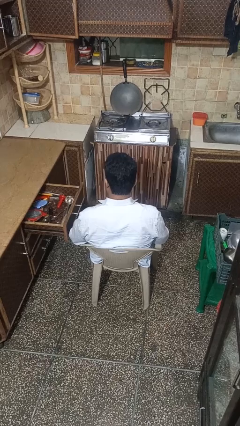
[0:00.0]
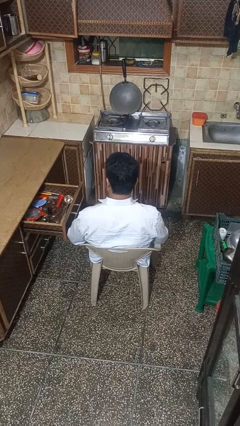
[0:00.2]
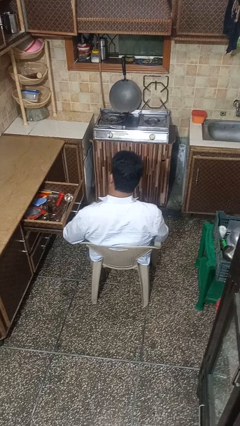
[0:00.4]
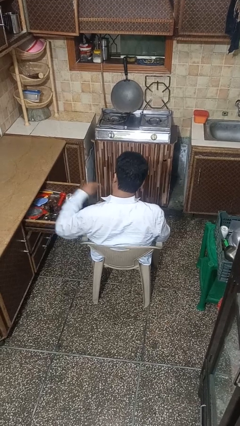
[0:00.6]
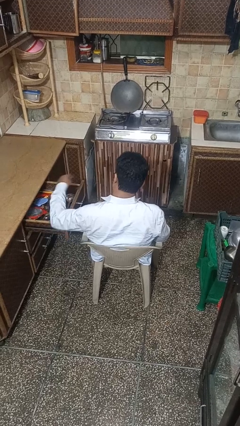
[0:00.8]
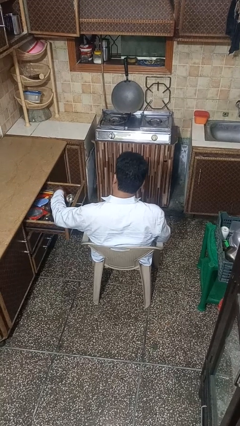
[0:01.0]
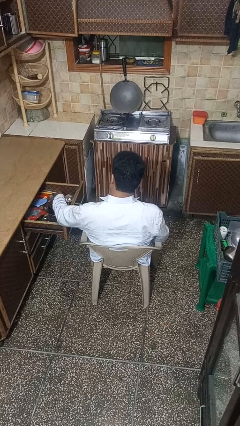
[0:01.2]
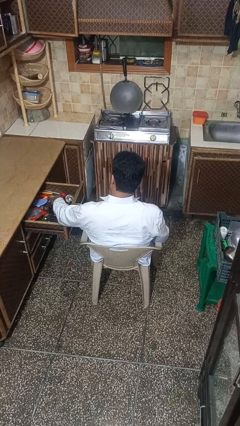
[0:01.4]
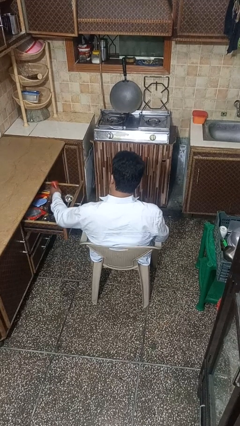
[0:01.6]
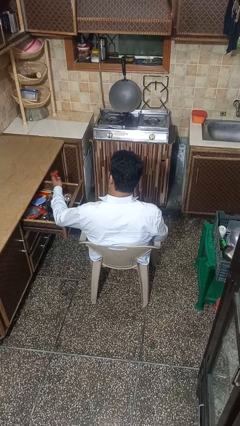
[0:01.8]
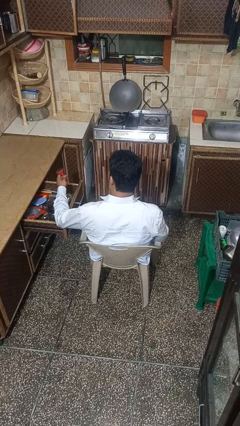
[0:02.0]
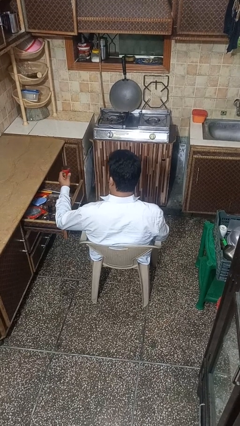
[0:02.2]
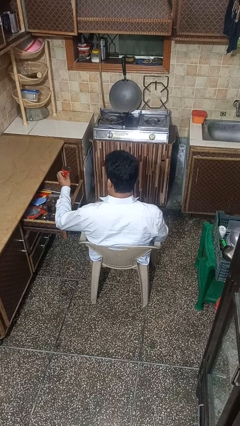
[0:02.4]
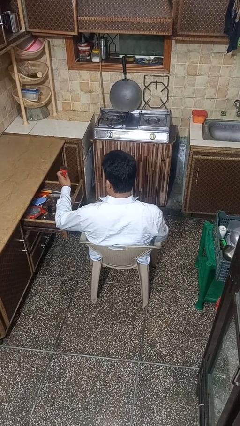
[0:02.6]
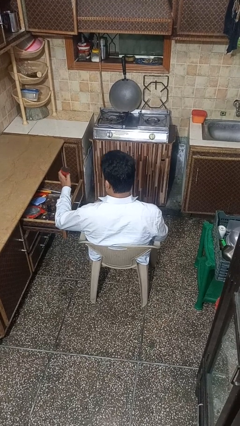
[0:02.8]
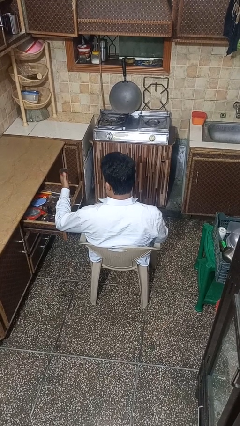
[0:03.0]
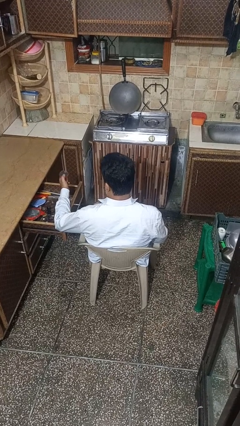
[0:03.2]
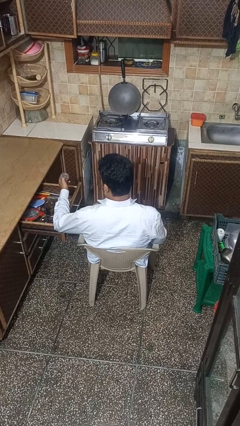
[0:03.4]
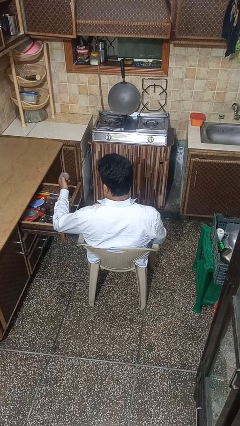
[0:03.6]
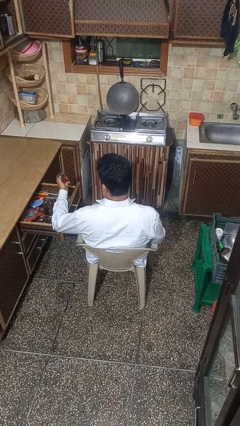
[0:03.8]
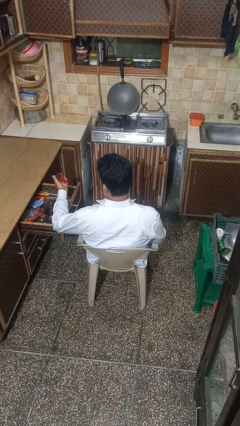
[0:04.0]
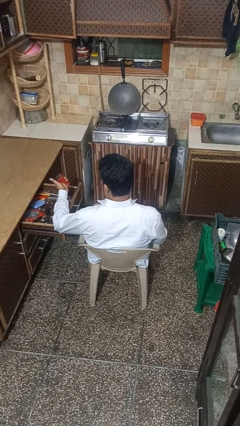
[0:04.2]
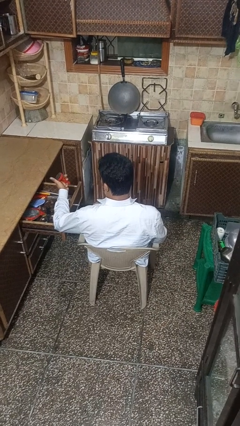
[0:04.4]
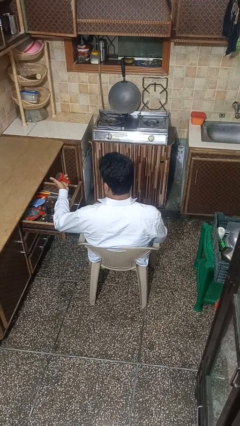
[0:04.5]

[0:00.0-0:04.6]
person takes object from kitchen drawer

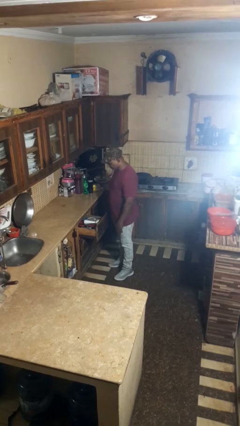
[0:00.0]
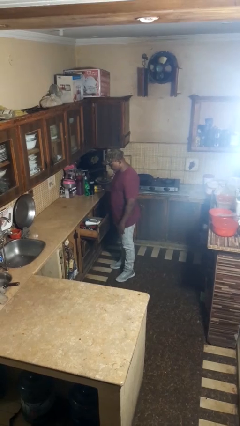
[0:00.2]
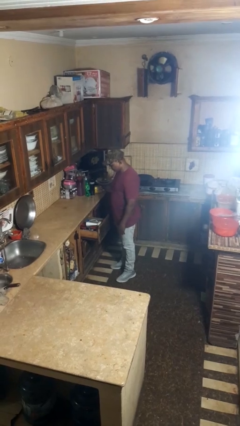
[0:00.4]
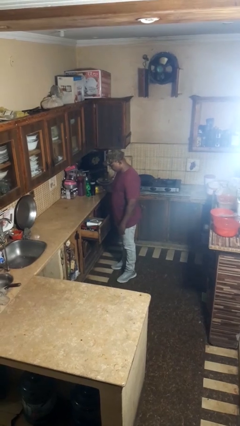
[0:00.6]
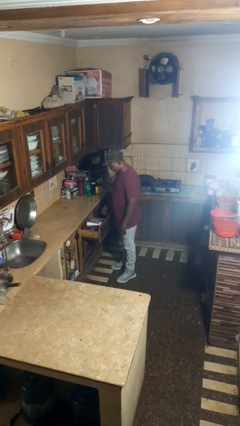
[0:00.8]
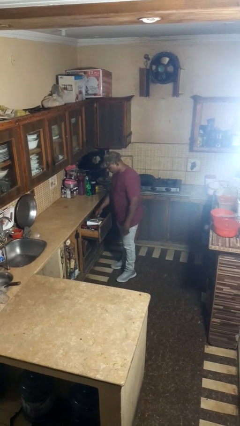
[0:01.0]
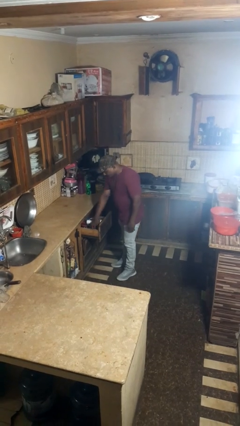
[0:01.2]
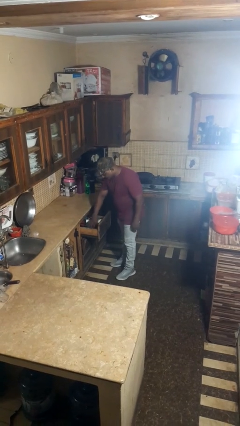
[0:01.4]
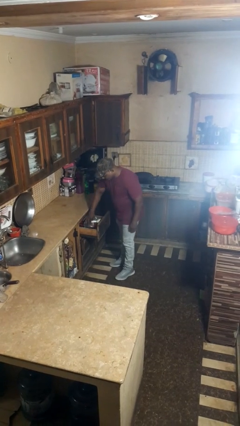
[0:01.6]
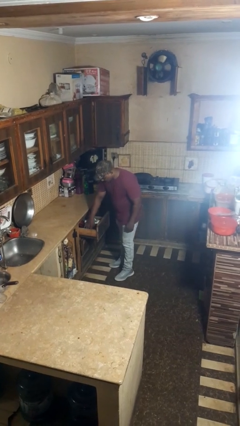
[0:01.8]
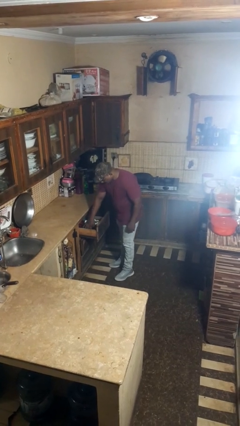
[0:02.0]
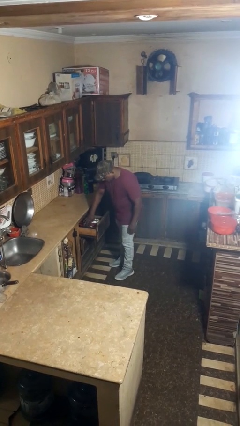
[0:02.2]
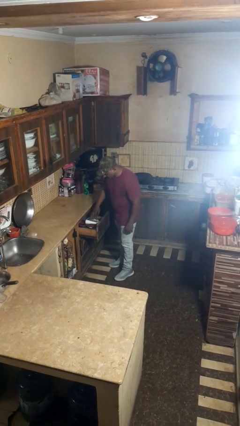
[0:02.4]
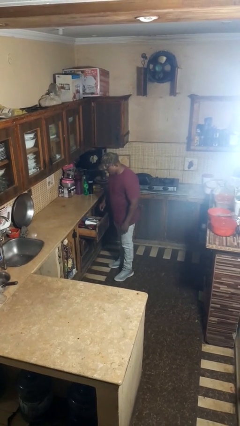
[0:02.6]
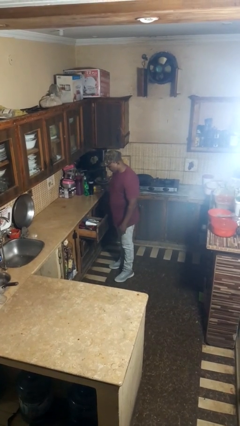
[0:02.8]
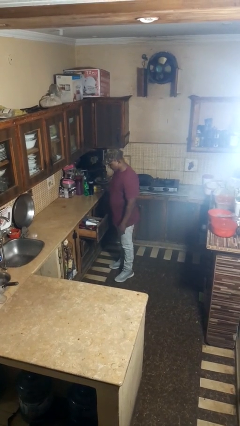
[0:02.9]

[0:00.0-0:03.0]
person searches in kitchen drawer

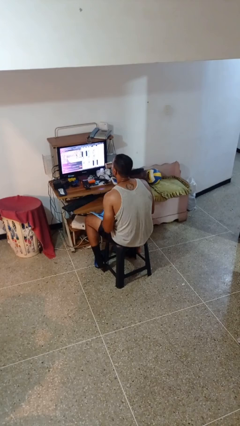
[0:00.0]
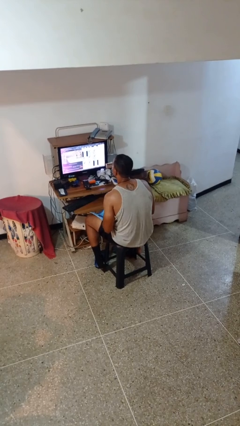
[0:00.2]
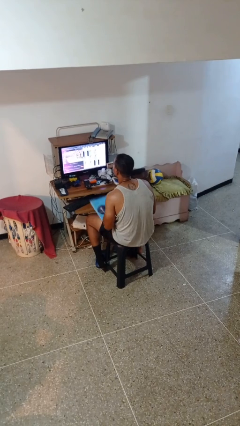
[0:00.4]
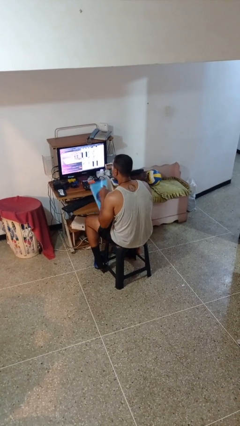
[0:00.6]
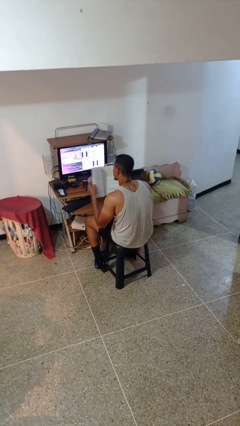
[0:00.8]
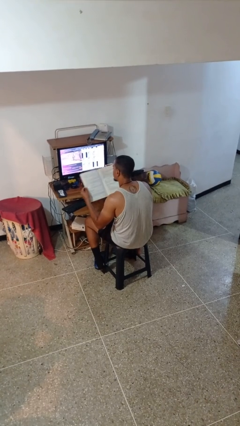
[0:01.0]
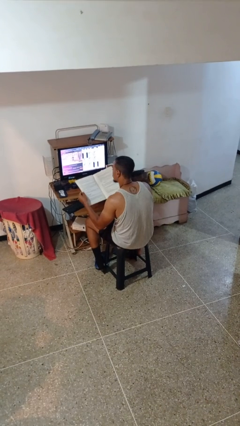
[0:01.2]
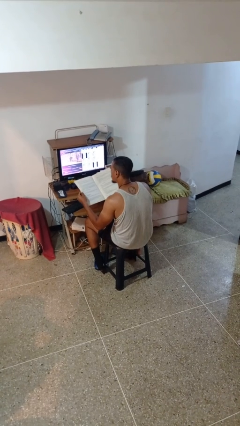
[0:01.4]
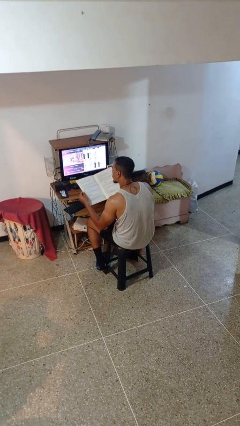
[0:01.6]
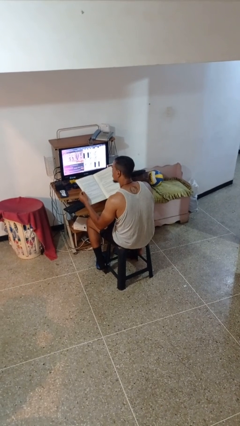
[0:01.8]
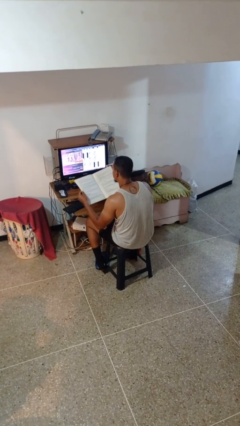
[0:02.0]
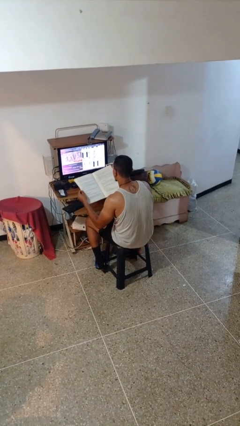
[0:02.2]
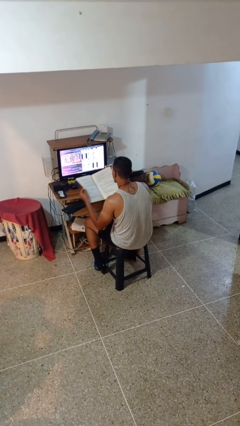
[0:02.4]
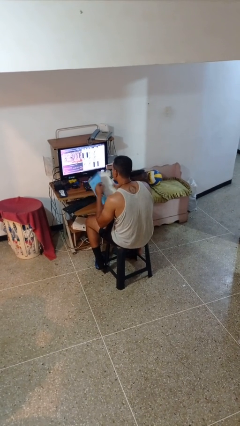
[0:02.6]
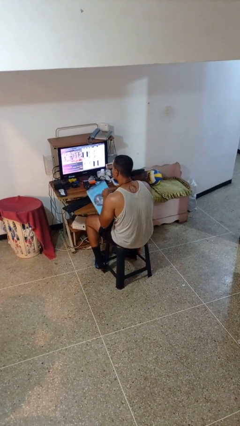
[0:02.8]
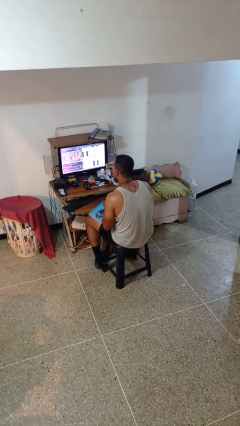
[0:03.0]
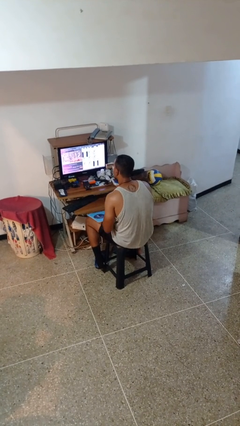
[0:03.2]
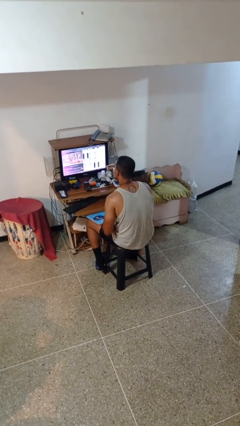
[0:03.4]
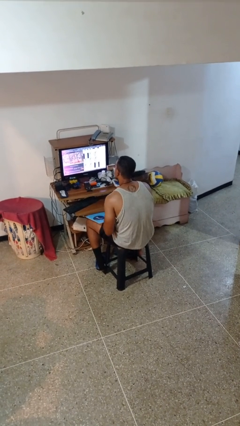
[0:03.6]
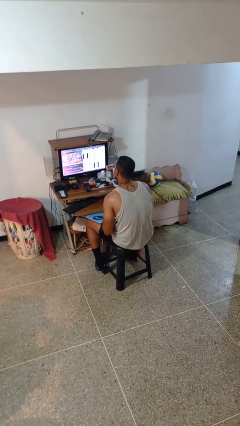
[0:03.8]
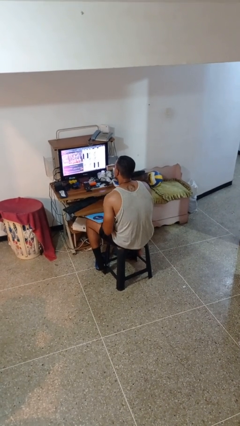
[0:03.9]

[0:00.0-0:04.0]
person reads magazine

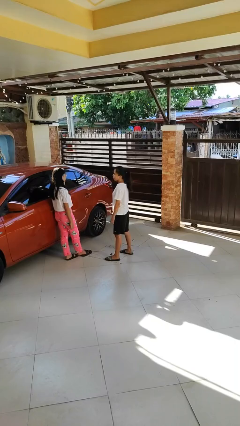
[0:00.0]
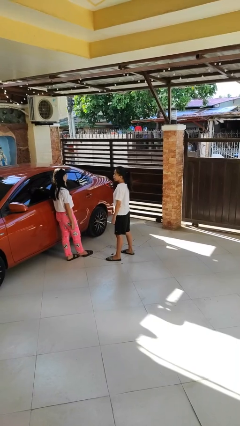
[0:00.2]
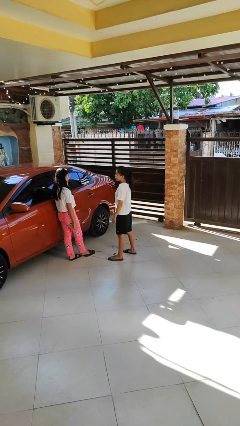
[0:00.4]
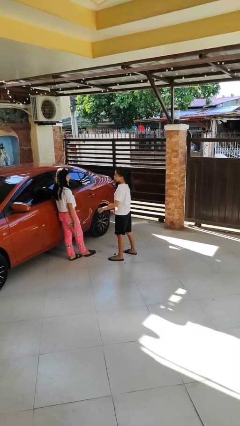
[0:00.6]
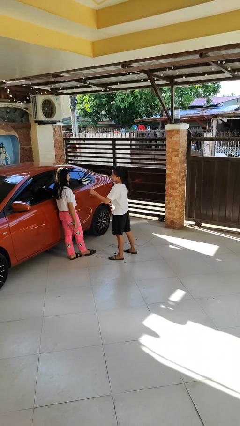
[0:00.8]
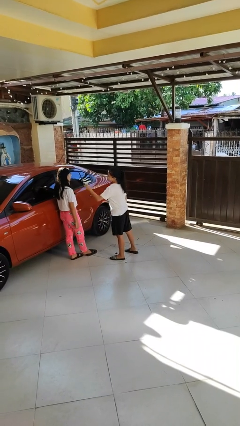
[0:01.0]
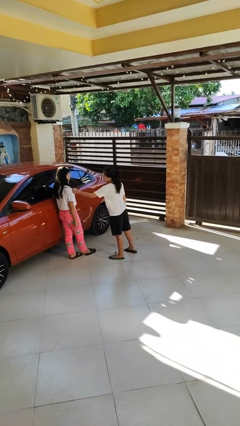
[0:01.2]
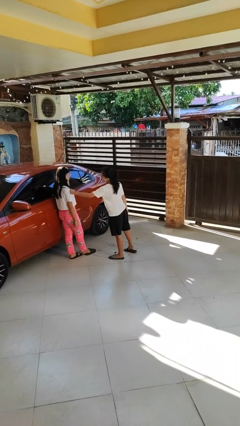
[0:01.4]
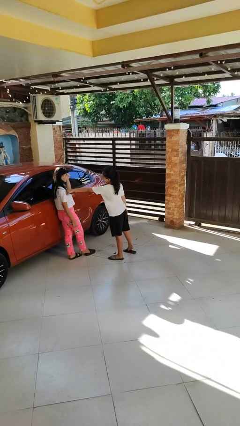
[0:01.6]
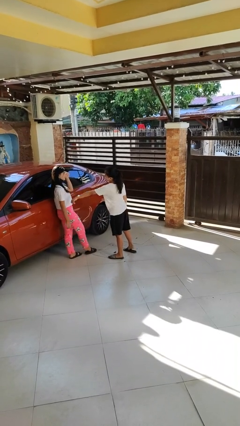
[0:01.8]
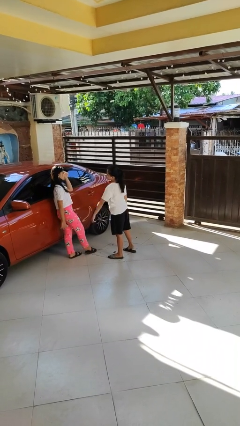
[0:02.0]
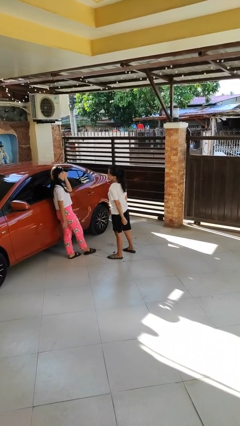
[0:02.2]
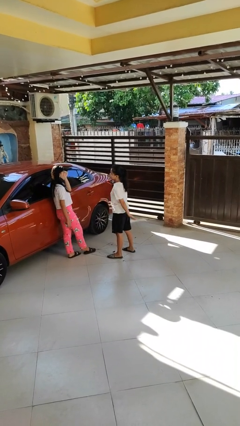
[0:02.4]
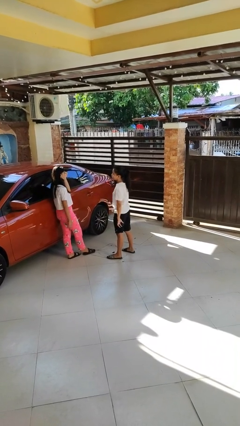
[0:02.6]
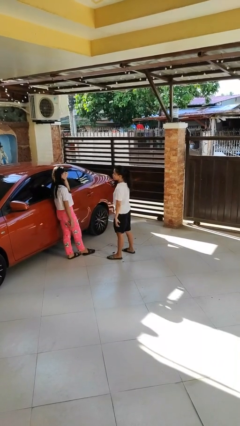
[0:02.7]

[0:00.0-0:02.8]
person pounds shoulders of person

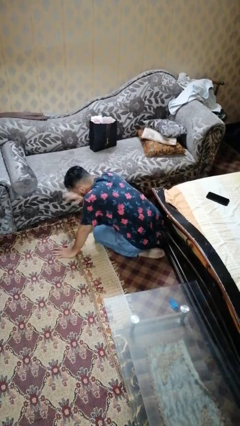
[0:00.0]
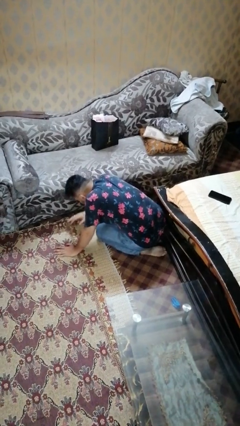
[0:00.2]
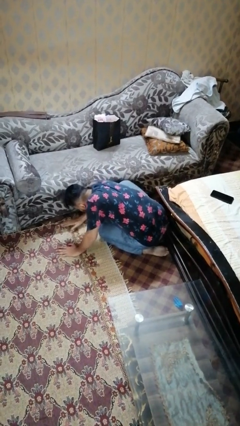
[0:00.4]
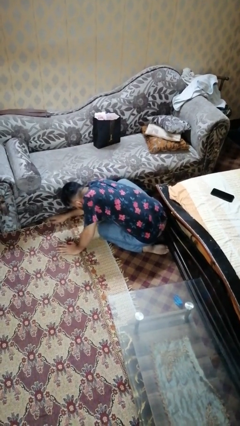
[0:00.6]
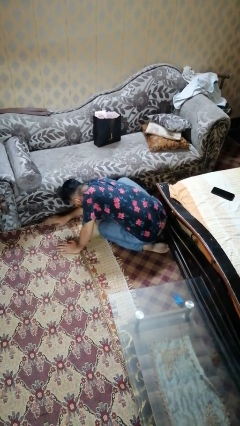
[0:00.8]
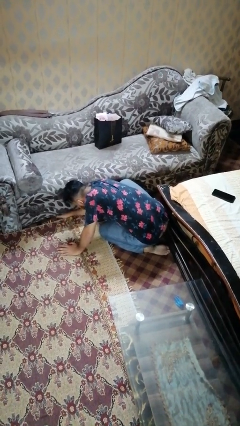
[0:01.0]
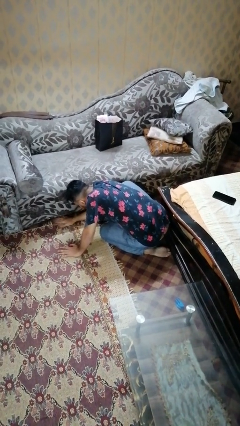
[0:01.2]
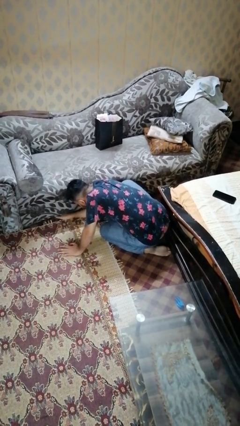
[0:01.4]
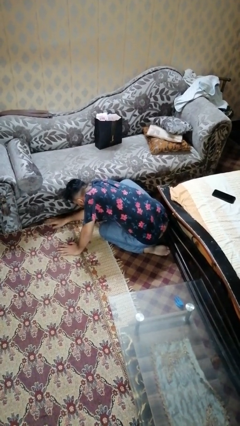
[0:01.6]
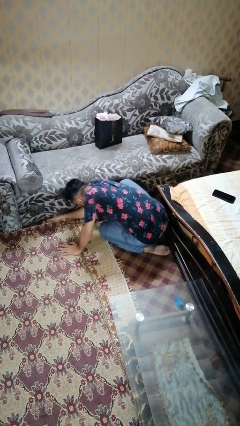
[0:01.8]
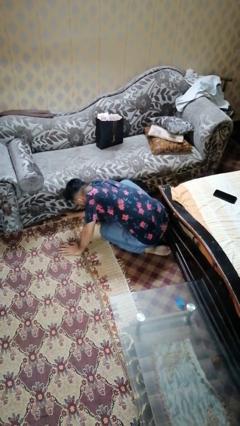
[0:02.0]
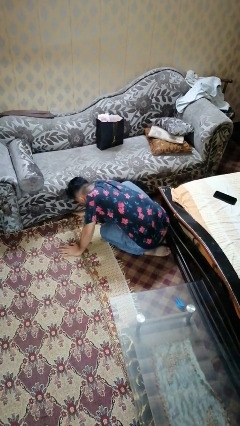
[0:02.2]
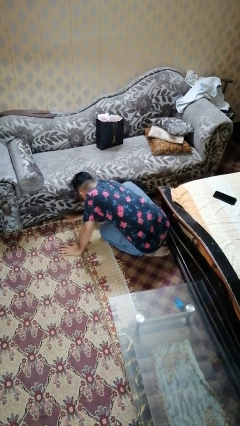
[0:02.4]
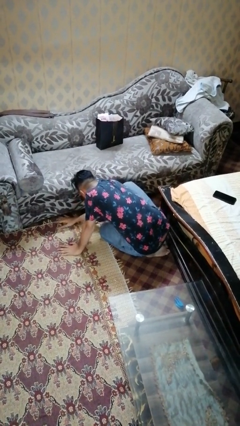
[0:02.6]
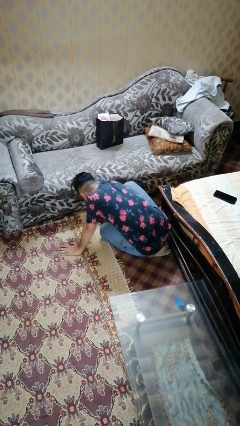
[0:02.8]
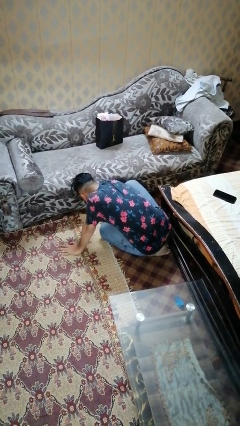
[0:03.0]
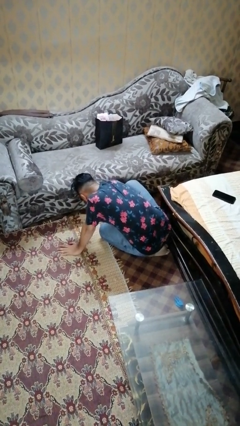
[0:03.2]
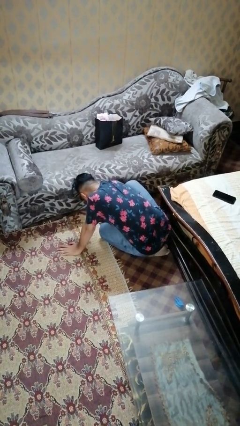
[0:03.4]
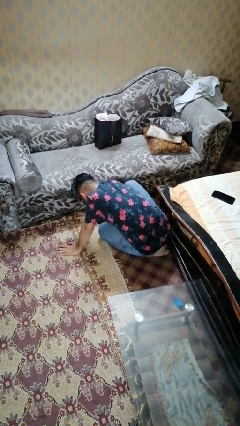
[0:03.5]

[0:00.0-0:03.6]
person searches under couch
